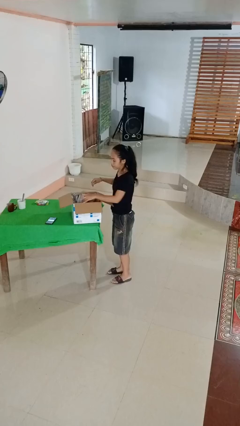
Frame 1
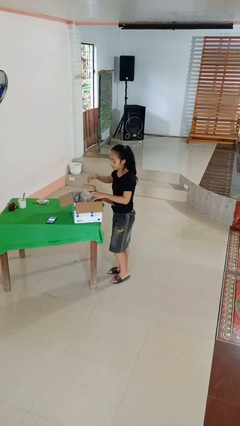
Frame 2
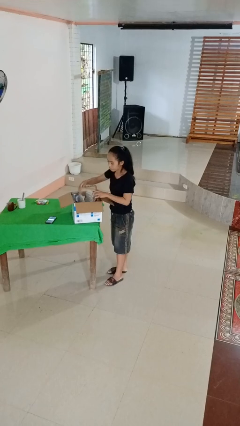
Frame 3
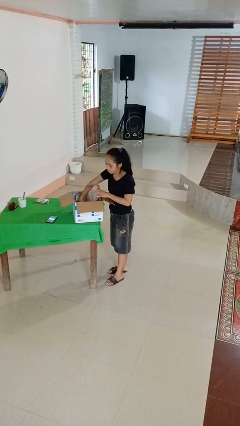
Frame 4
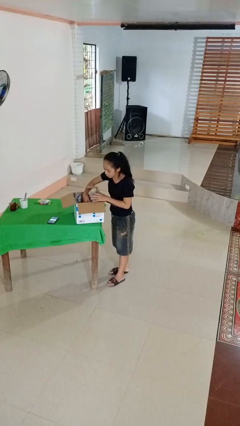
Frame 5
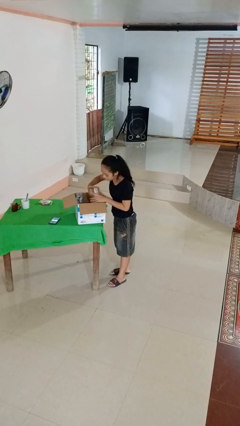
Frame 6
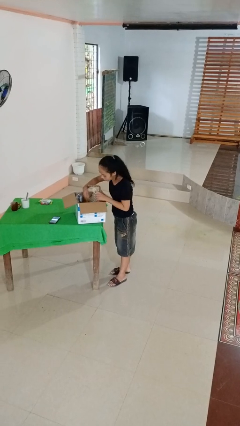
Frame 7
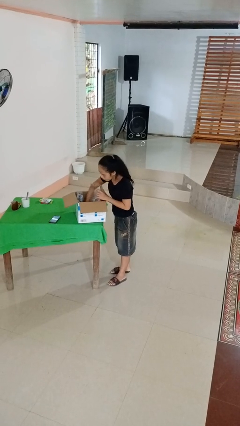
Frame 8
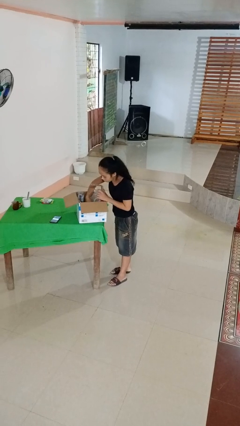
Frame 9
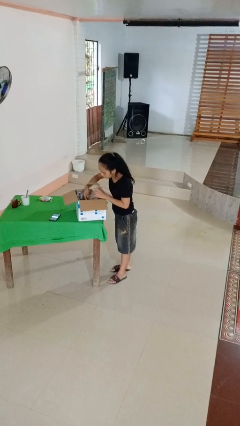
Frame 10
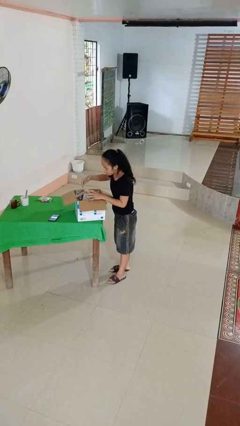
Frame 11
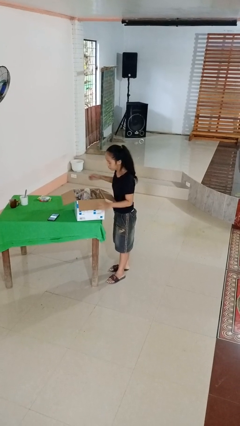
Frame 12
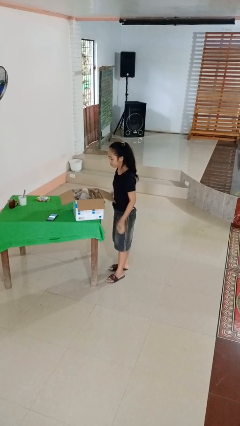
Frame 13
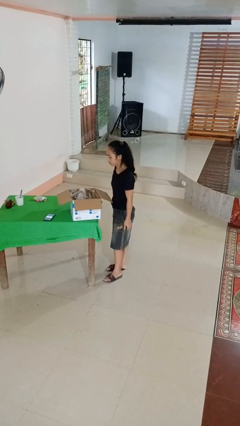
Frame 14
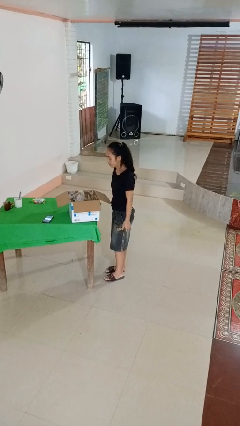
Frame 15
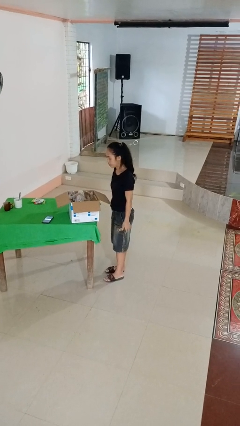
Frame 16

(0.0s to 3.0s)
person searches in box

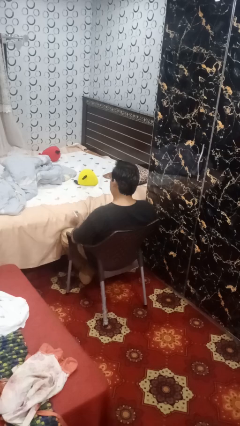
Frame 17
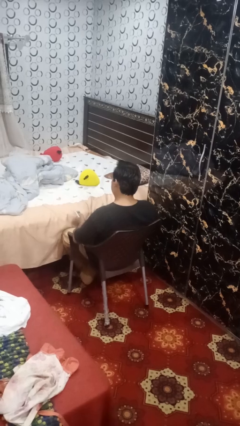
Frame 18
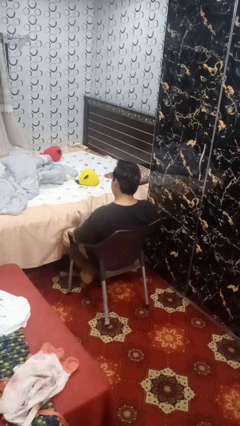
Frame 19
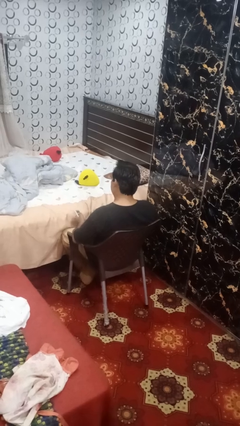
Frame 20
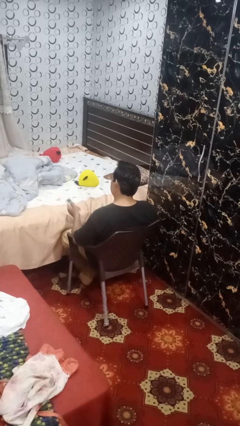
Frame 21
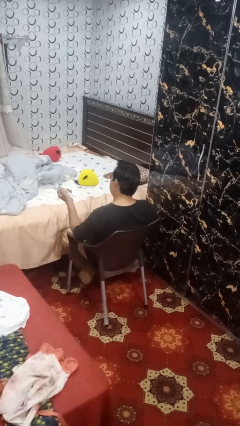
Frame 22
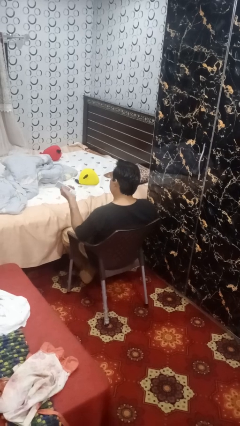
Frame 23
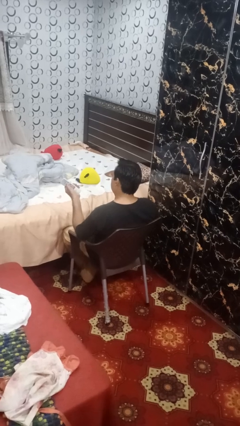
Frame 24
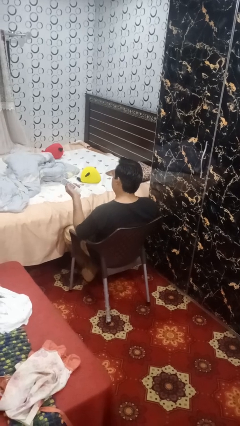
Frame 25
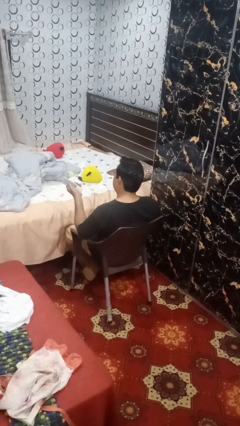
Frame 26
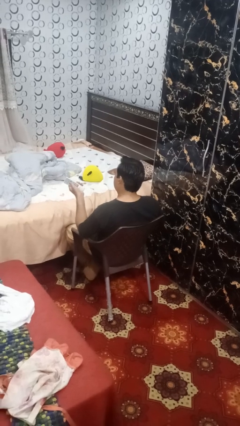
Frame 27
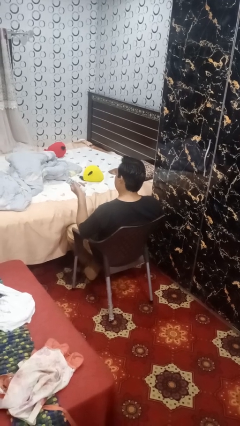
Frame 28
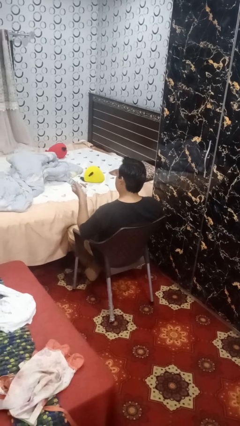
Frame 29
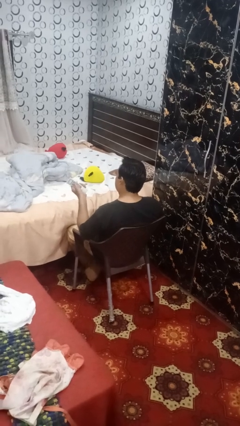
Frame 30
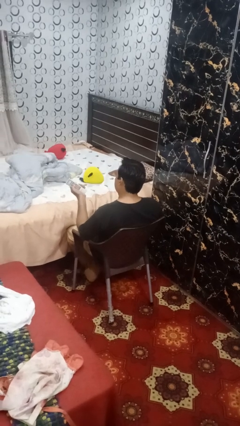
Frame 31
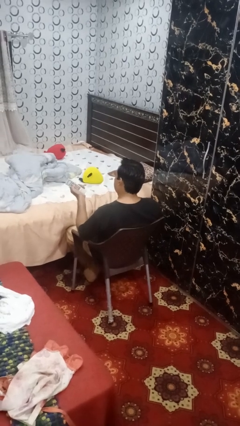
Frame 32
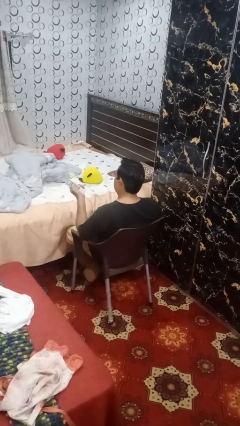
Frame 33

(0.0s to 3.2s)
person uses television remote

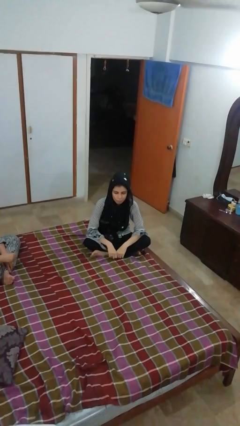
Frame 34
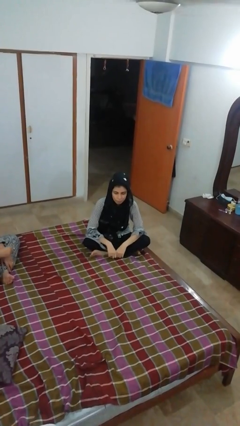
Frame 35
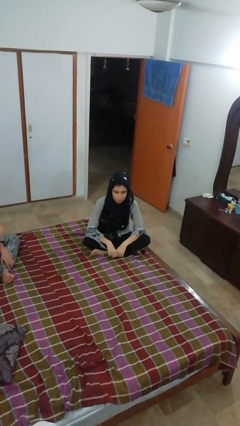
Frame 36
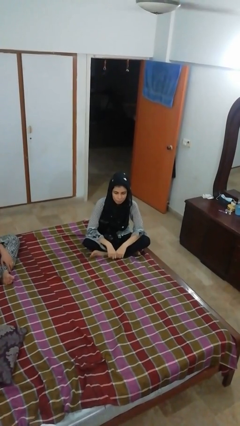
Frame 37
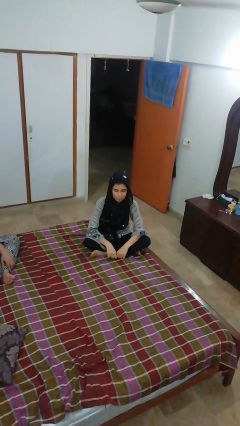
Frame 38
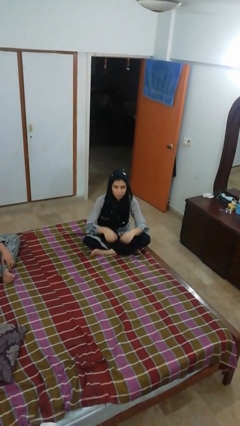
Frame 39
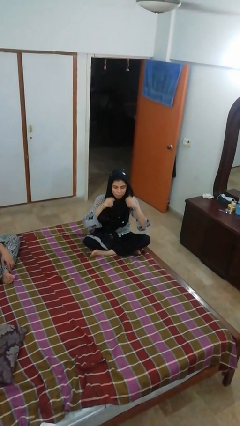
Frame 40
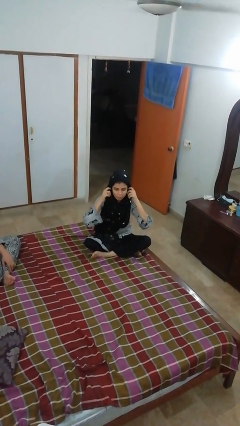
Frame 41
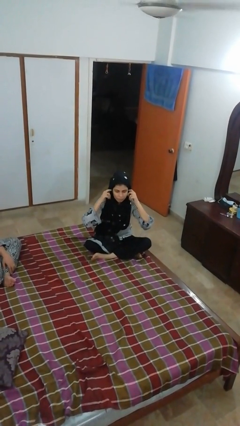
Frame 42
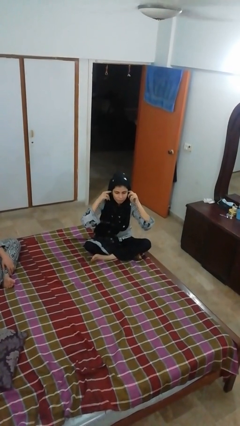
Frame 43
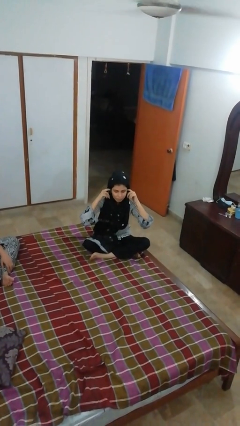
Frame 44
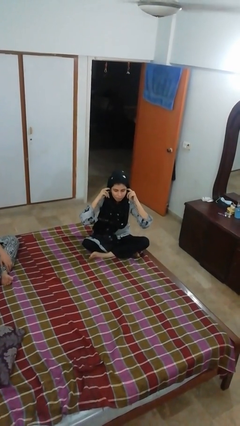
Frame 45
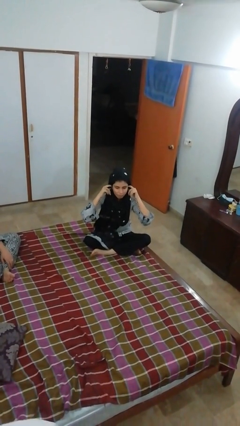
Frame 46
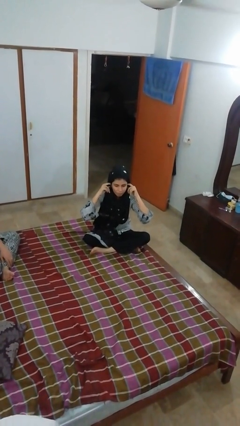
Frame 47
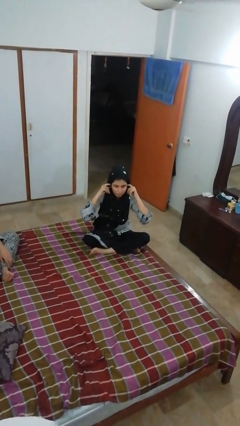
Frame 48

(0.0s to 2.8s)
person puts fingers in ear

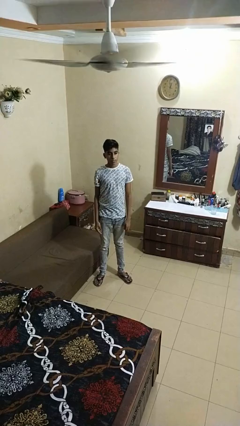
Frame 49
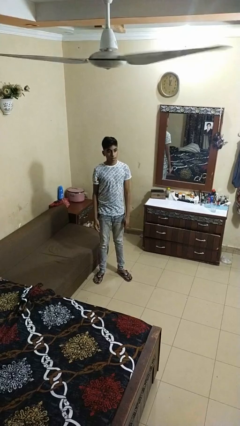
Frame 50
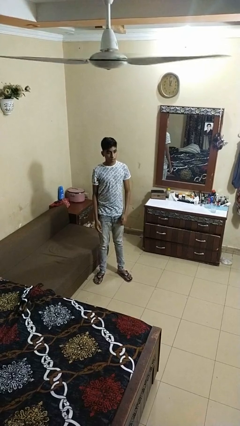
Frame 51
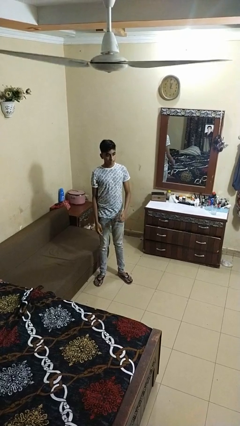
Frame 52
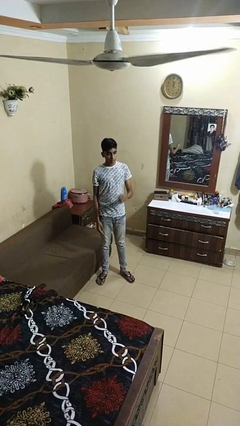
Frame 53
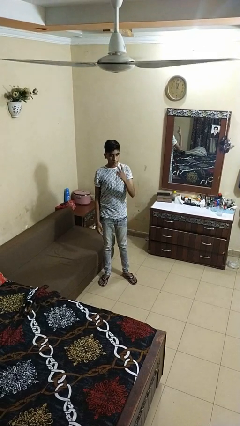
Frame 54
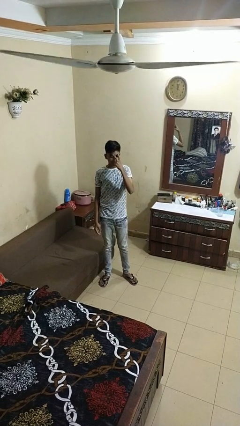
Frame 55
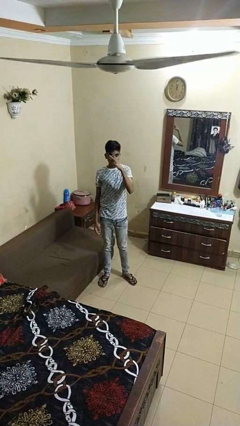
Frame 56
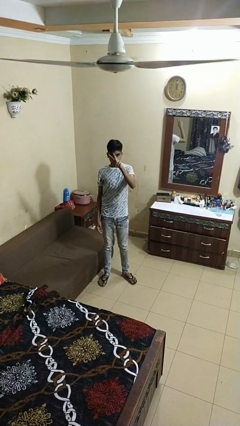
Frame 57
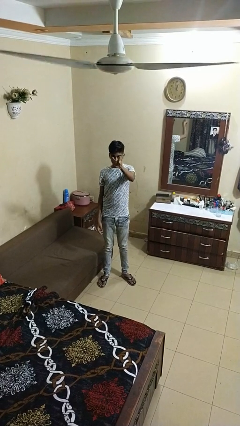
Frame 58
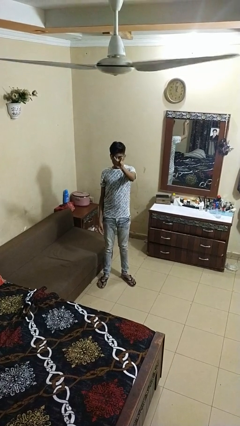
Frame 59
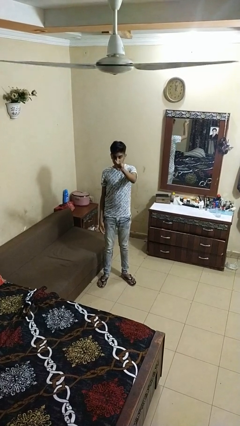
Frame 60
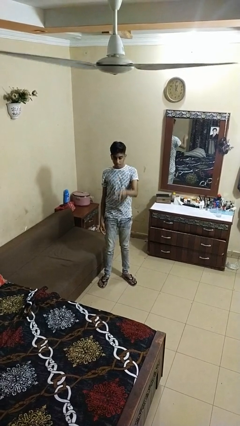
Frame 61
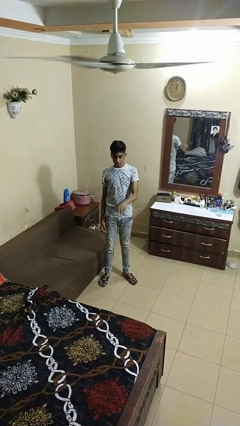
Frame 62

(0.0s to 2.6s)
person gestures watch closely

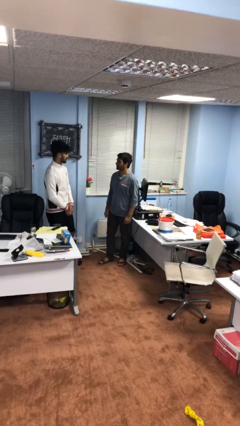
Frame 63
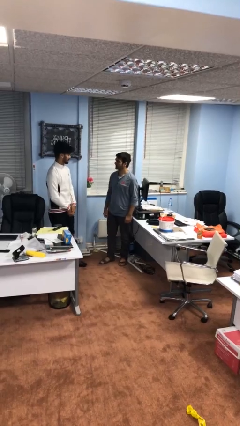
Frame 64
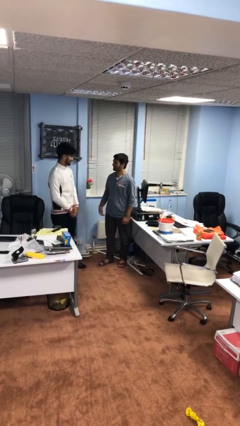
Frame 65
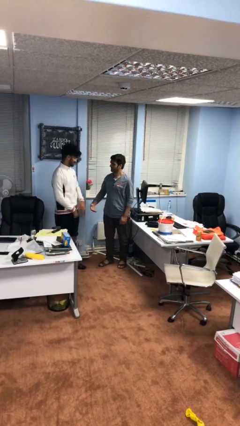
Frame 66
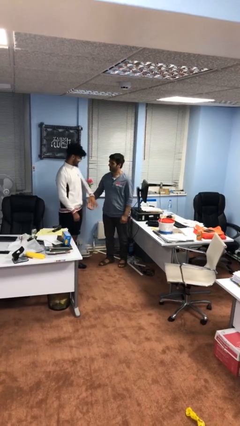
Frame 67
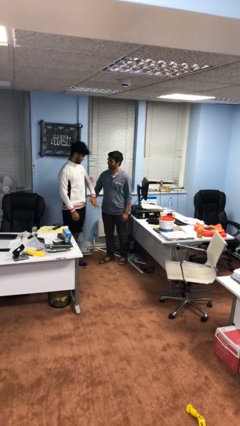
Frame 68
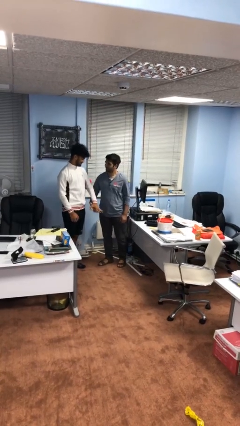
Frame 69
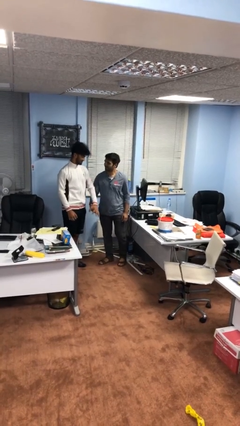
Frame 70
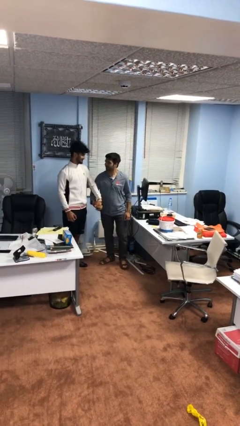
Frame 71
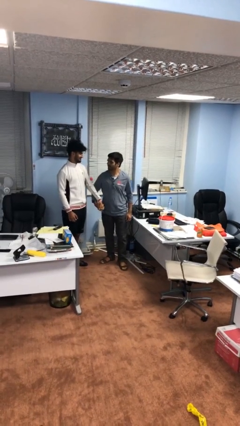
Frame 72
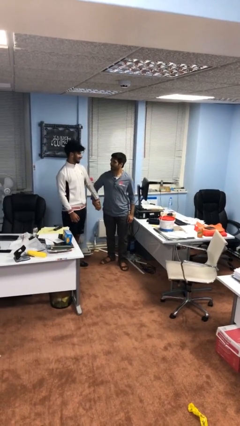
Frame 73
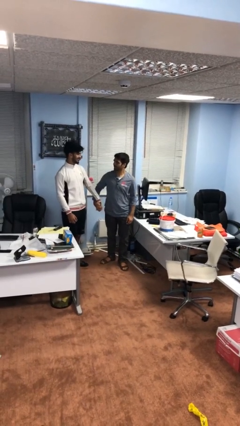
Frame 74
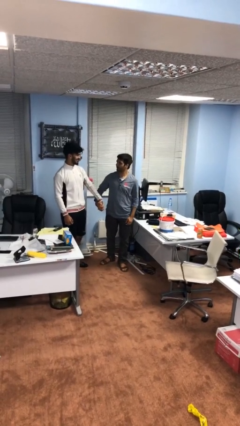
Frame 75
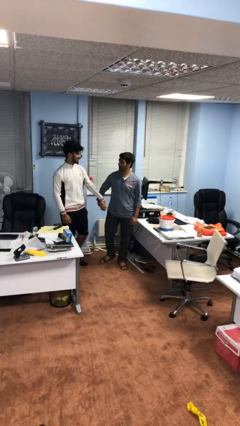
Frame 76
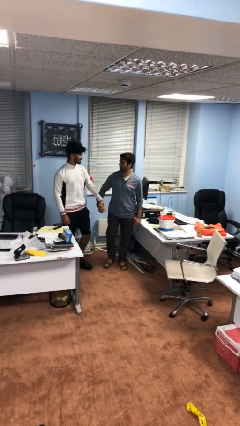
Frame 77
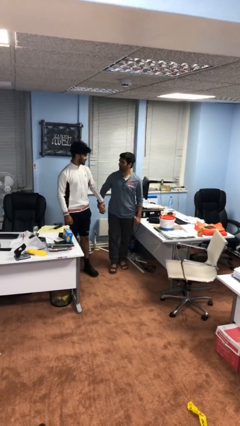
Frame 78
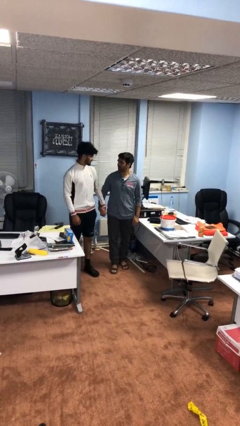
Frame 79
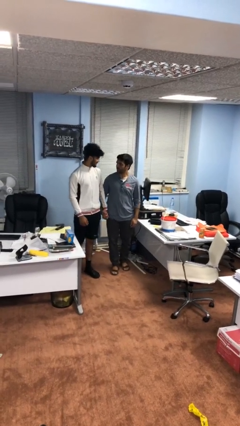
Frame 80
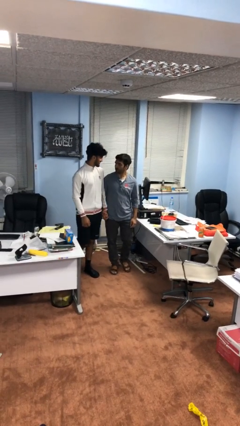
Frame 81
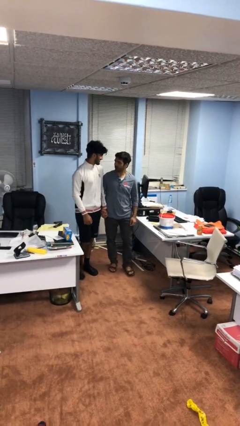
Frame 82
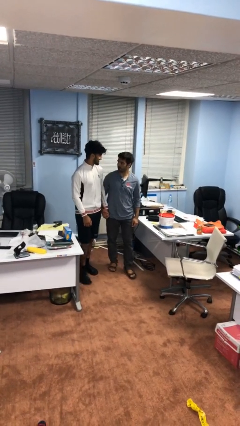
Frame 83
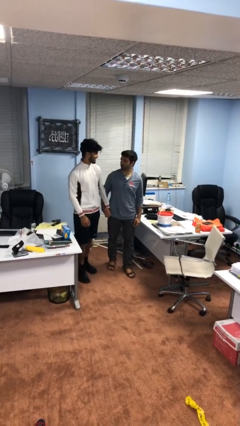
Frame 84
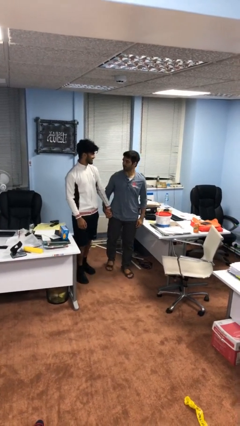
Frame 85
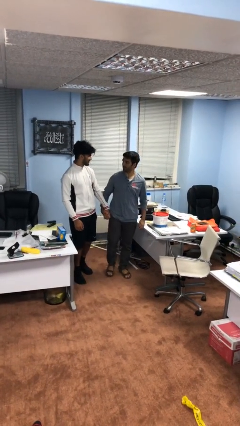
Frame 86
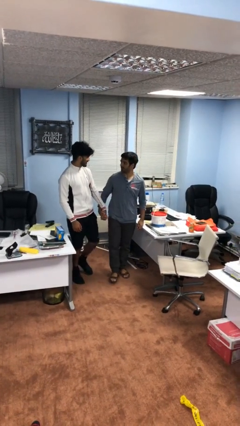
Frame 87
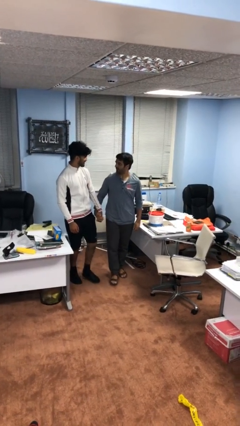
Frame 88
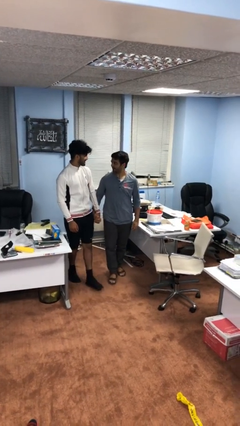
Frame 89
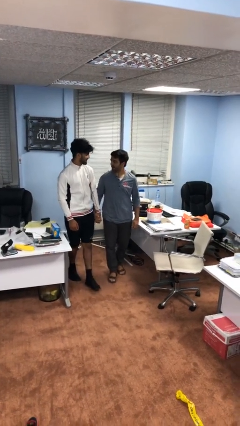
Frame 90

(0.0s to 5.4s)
person holds hand
